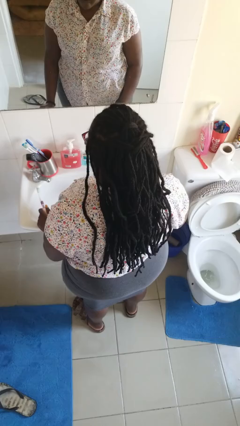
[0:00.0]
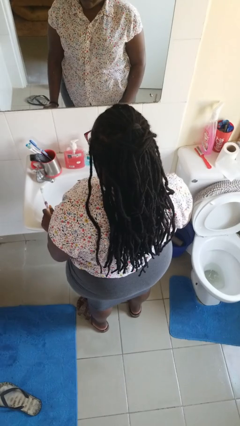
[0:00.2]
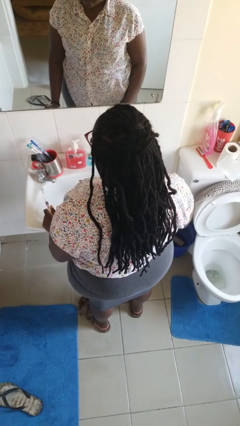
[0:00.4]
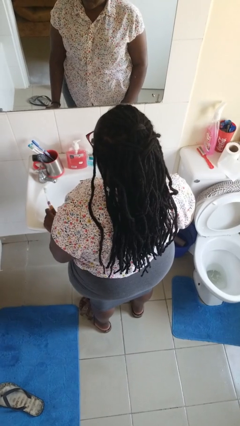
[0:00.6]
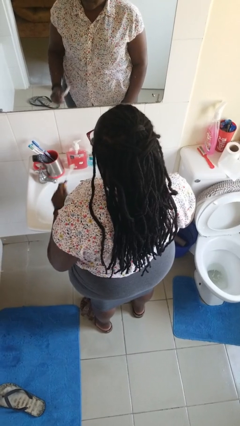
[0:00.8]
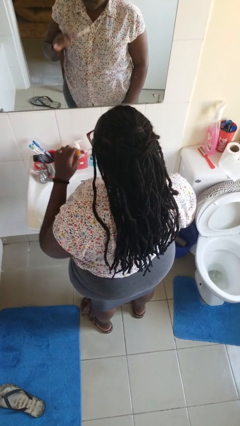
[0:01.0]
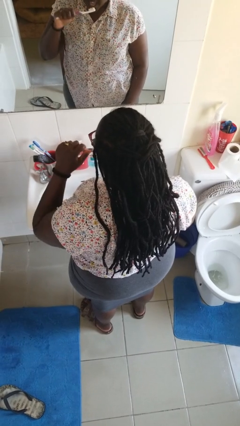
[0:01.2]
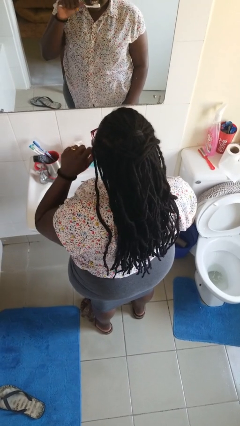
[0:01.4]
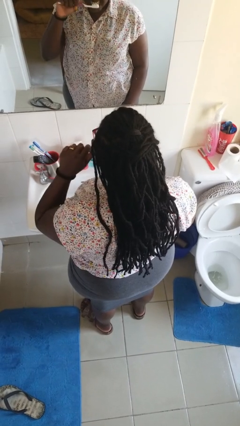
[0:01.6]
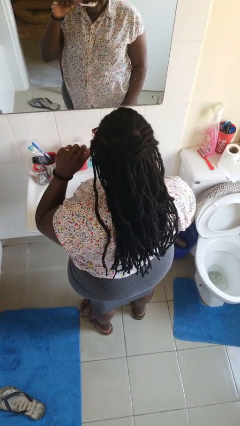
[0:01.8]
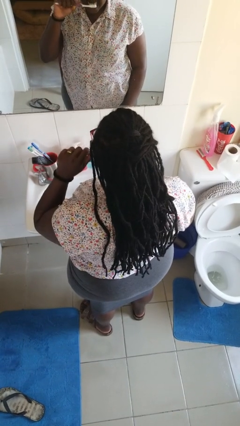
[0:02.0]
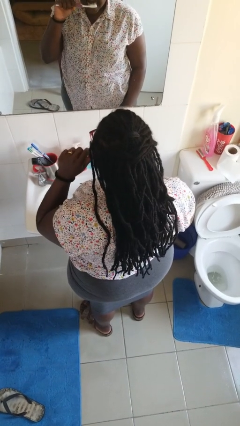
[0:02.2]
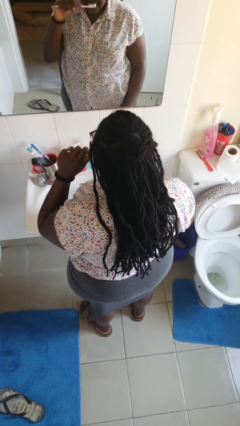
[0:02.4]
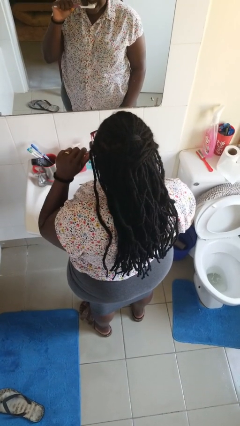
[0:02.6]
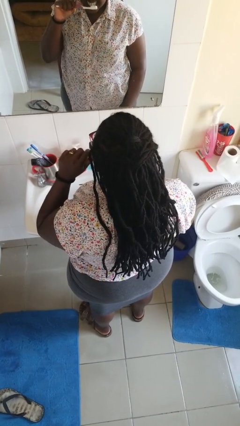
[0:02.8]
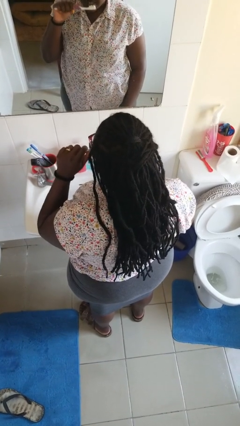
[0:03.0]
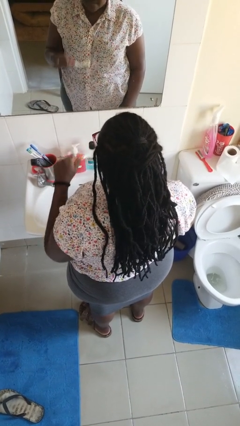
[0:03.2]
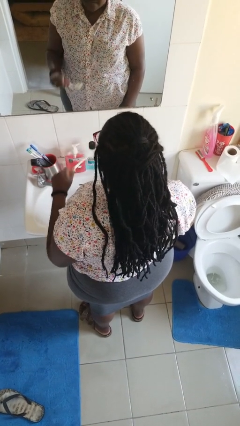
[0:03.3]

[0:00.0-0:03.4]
person brushes teeth

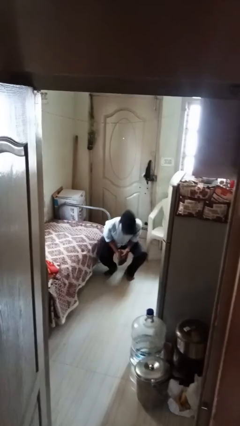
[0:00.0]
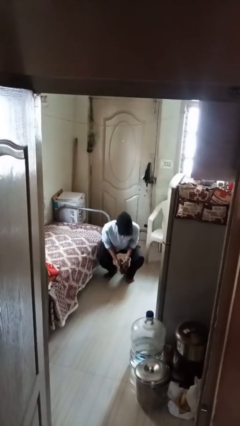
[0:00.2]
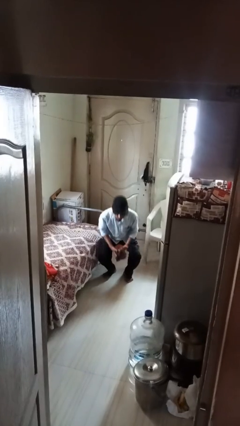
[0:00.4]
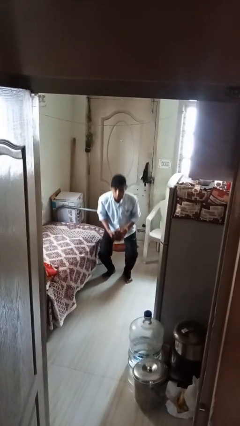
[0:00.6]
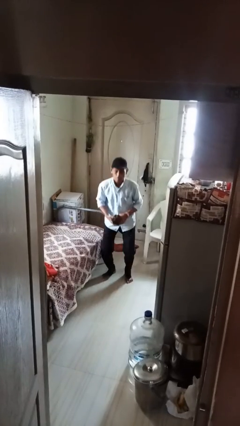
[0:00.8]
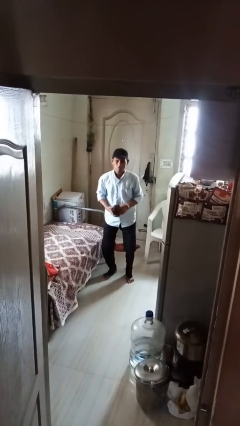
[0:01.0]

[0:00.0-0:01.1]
person catches dropped object

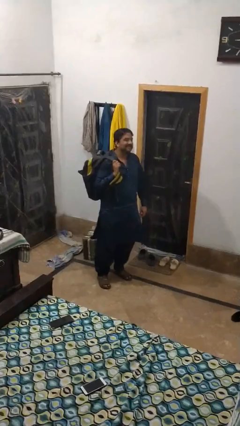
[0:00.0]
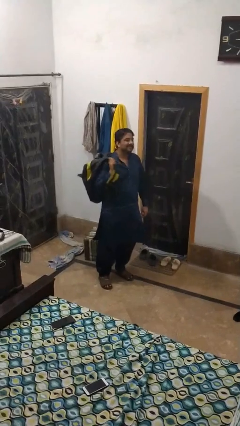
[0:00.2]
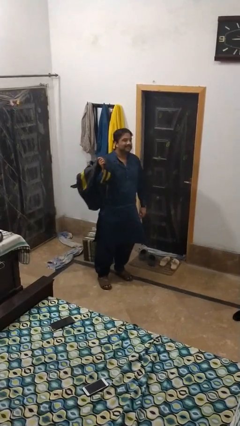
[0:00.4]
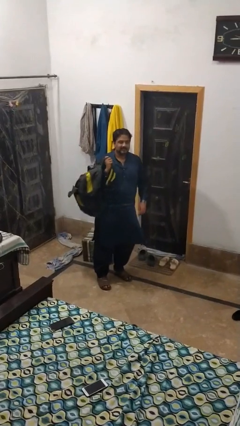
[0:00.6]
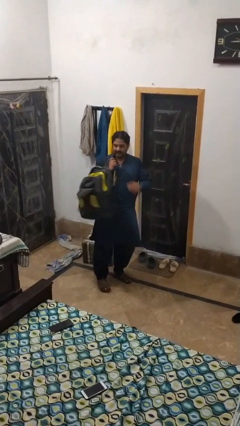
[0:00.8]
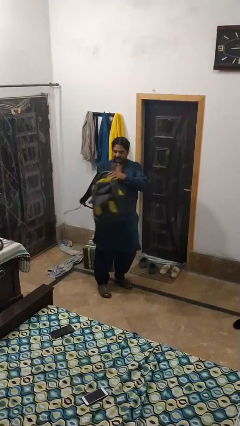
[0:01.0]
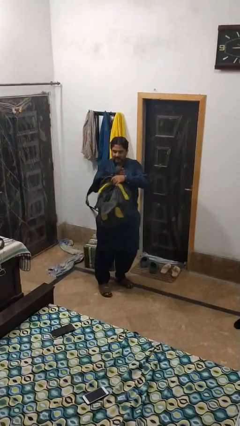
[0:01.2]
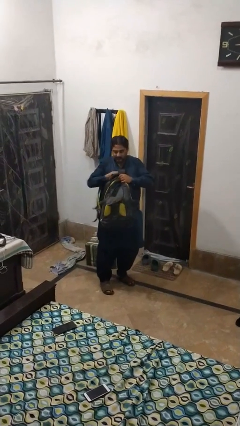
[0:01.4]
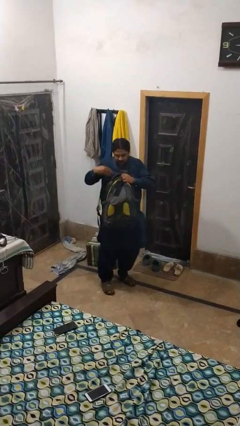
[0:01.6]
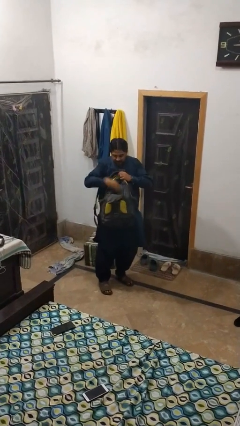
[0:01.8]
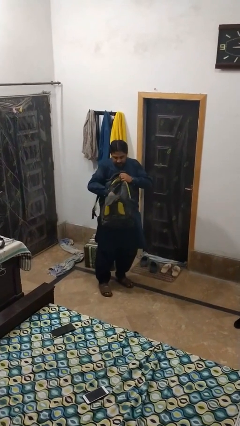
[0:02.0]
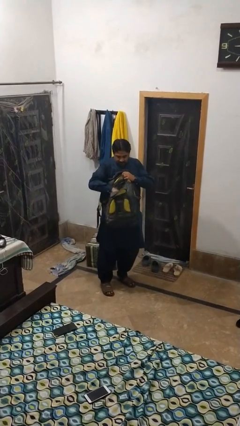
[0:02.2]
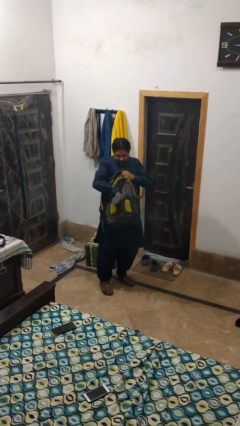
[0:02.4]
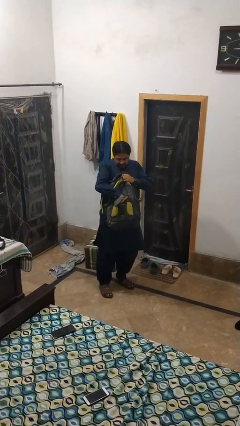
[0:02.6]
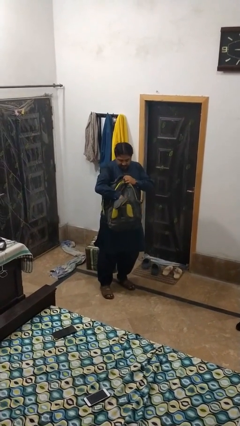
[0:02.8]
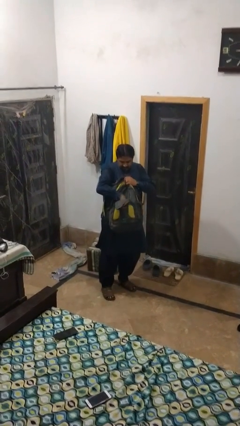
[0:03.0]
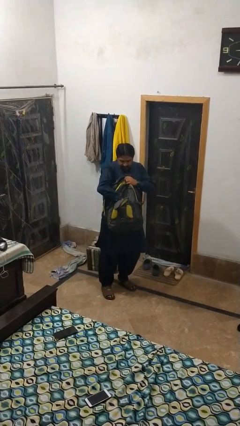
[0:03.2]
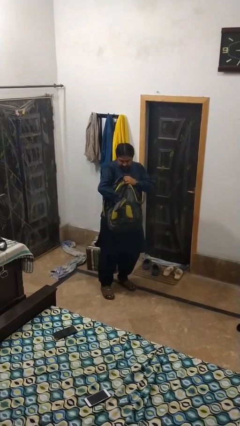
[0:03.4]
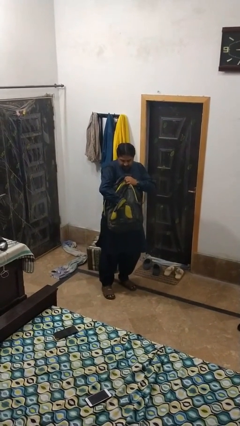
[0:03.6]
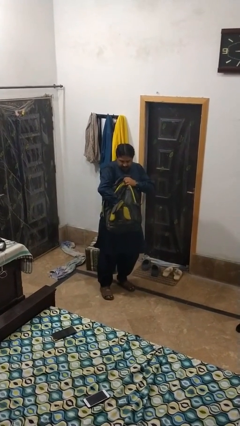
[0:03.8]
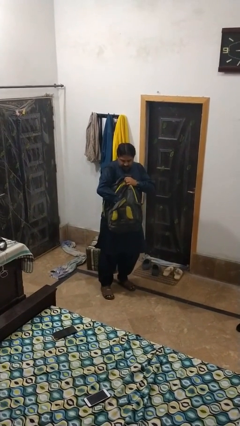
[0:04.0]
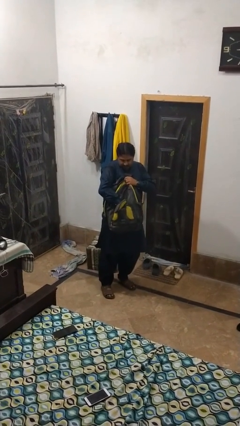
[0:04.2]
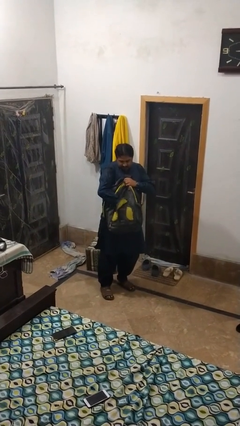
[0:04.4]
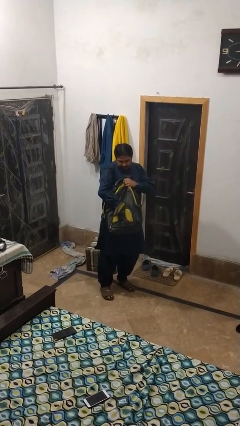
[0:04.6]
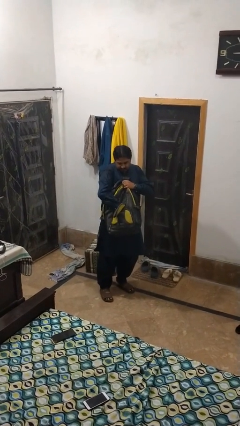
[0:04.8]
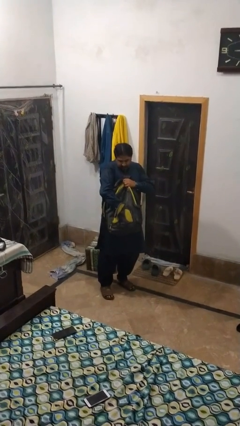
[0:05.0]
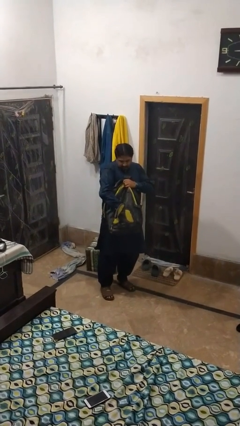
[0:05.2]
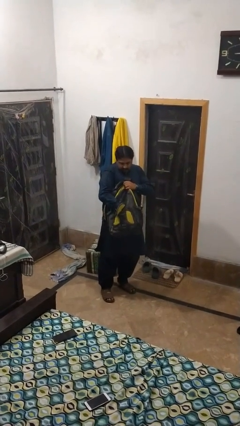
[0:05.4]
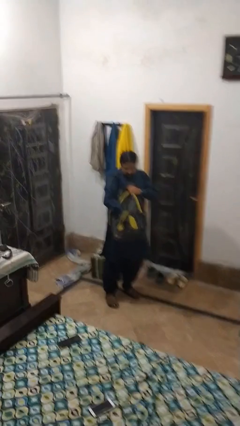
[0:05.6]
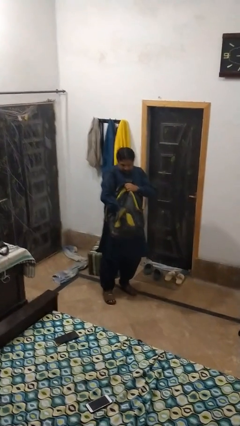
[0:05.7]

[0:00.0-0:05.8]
person searches in backpack

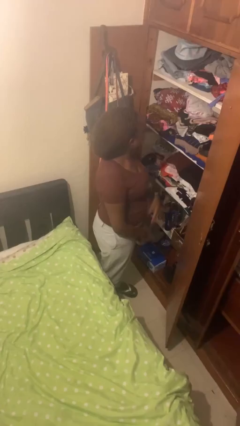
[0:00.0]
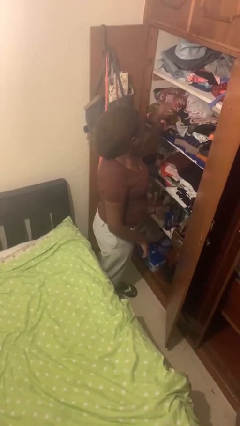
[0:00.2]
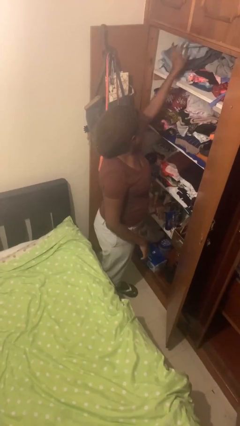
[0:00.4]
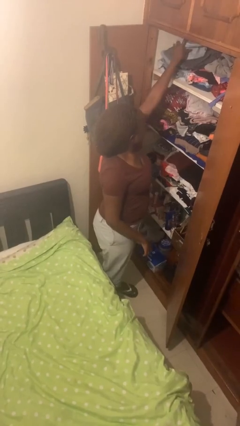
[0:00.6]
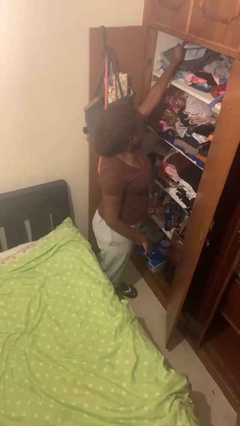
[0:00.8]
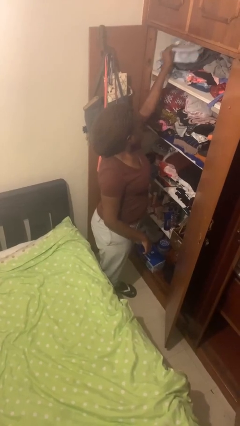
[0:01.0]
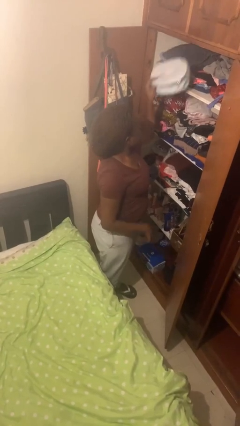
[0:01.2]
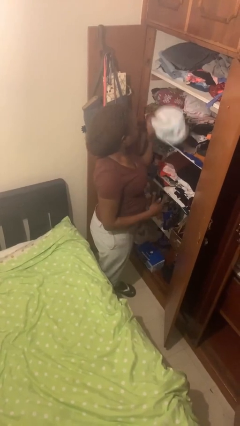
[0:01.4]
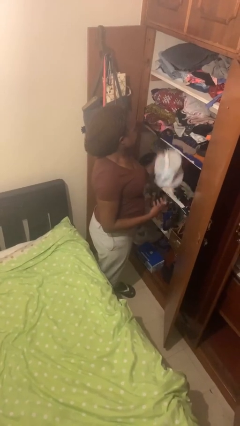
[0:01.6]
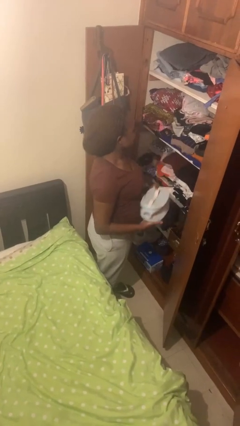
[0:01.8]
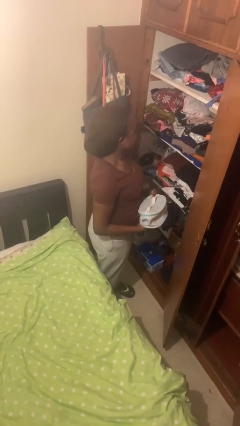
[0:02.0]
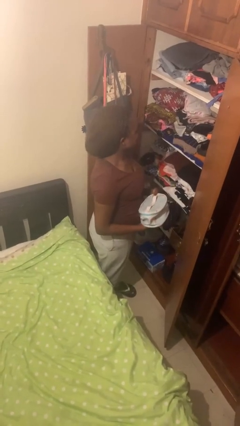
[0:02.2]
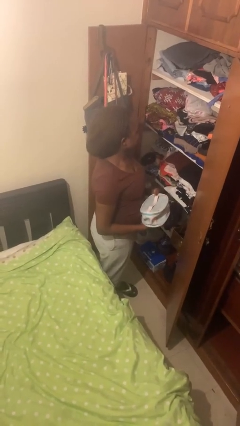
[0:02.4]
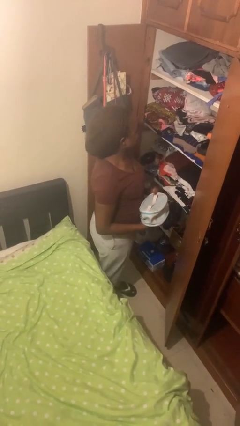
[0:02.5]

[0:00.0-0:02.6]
person picks up object from shelf

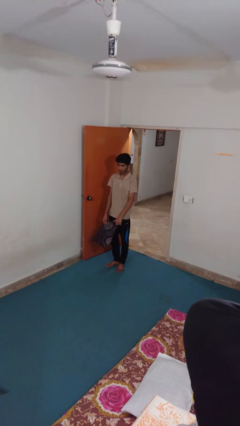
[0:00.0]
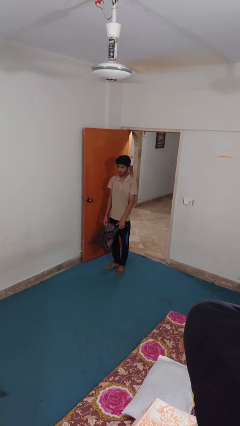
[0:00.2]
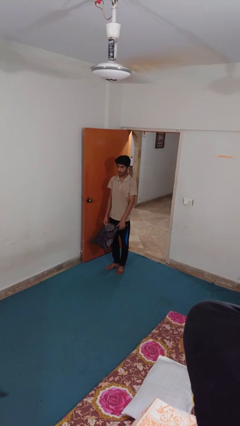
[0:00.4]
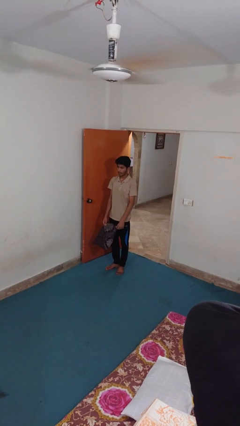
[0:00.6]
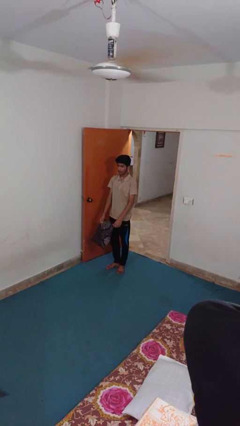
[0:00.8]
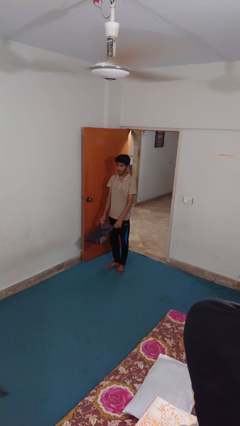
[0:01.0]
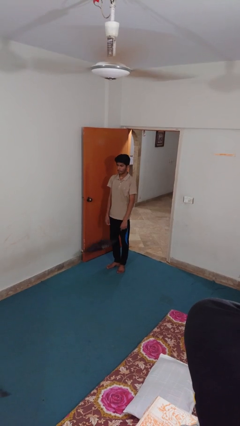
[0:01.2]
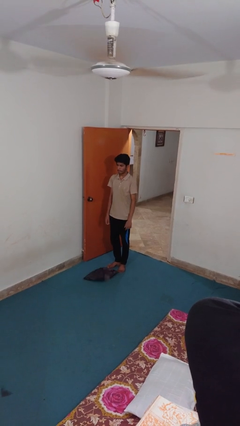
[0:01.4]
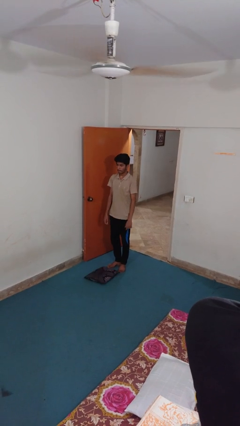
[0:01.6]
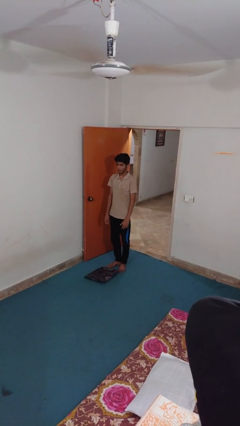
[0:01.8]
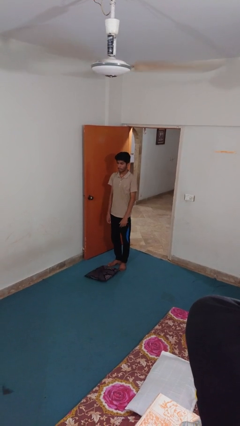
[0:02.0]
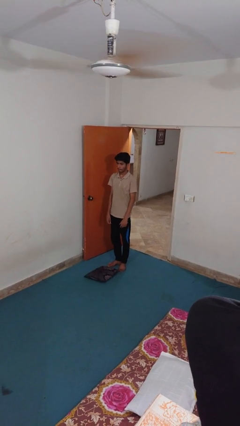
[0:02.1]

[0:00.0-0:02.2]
person drops object

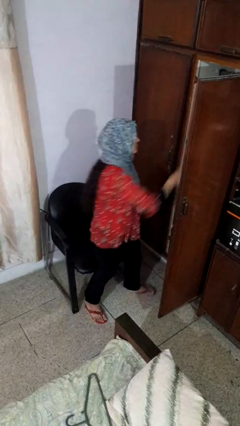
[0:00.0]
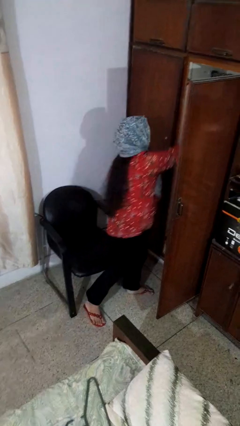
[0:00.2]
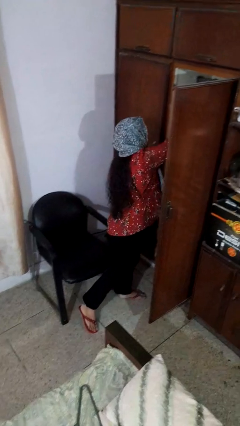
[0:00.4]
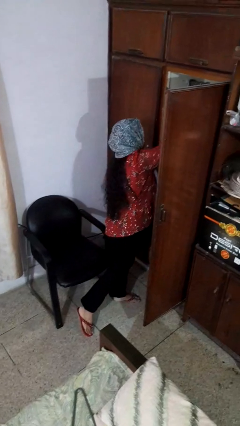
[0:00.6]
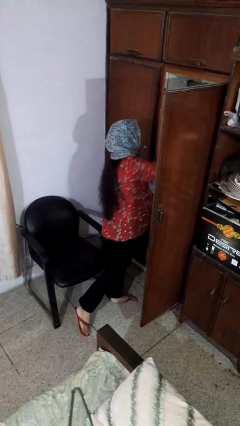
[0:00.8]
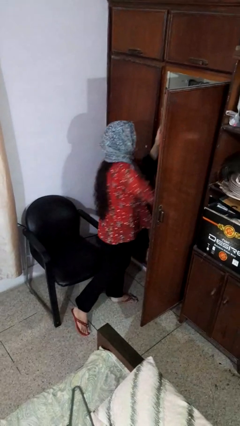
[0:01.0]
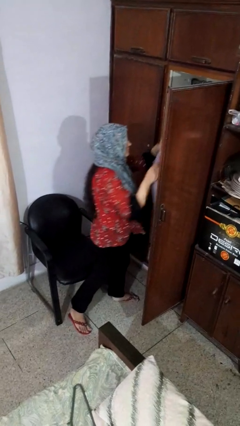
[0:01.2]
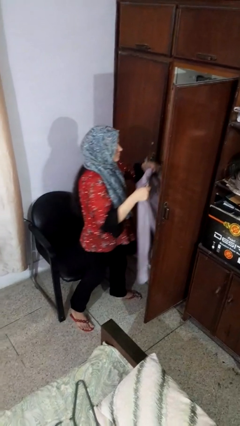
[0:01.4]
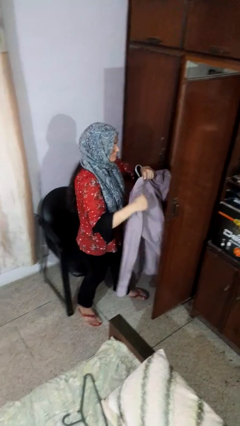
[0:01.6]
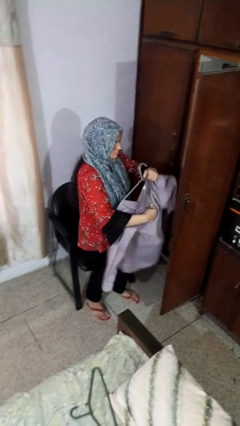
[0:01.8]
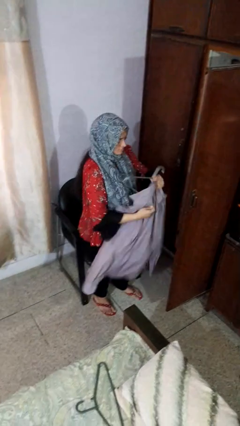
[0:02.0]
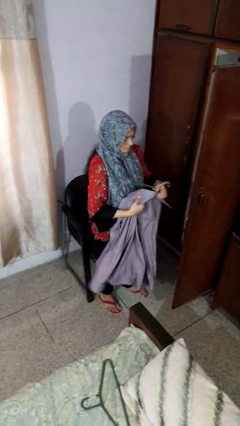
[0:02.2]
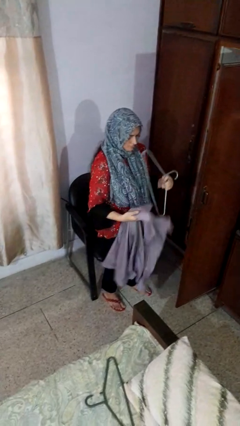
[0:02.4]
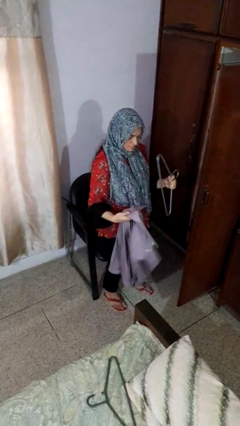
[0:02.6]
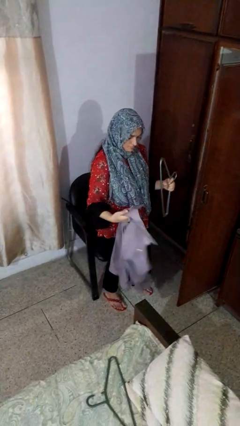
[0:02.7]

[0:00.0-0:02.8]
person takes clothes from closet
